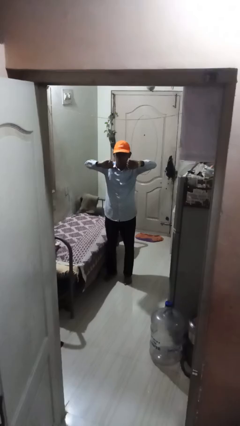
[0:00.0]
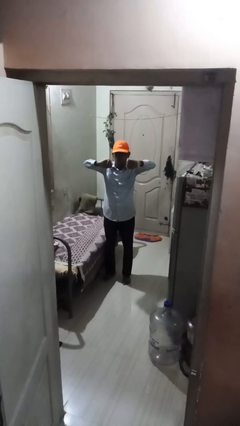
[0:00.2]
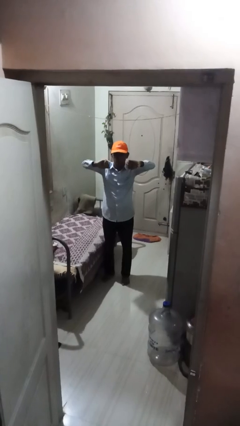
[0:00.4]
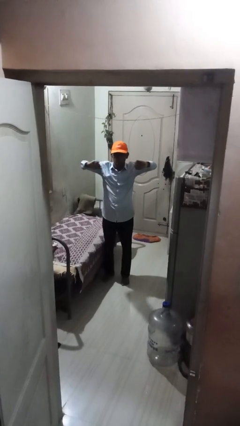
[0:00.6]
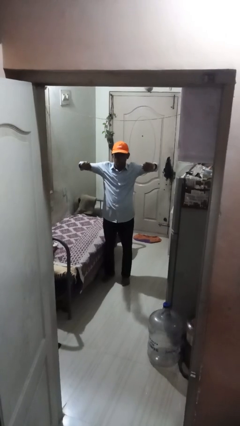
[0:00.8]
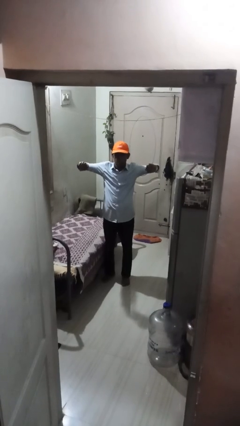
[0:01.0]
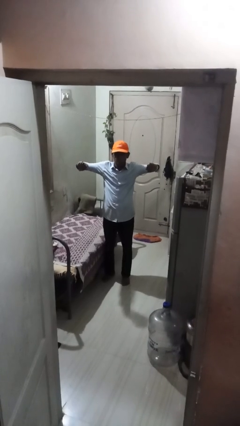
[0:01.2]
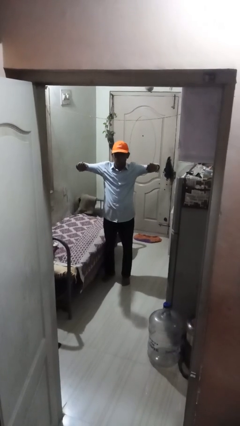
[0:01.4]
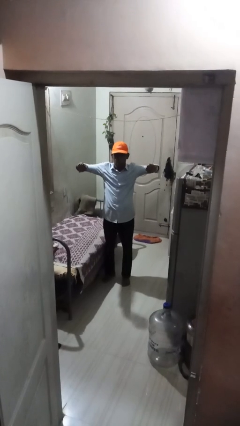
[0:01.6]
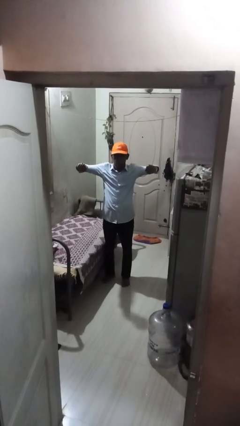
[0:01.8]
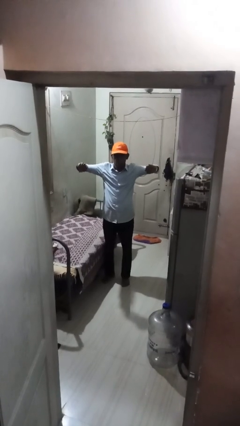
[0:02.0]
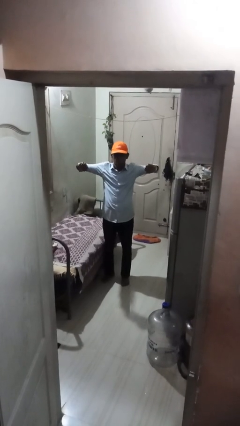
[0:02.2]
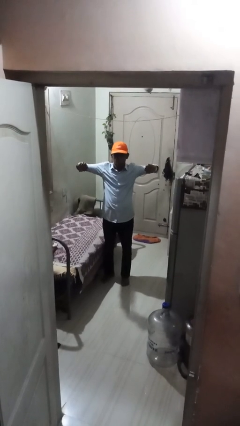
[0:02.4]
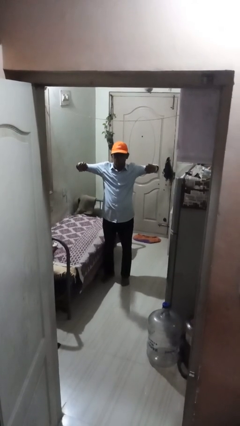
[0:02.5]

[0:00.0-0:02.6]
person gestures zoom out

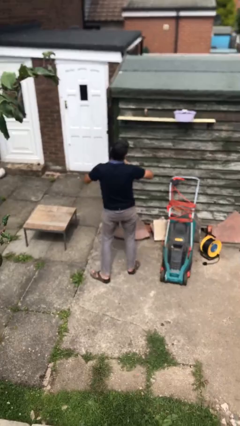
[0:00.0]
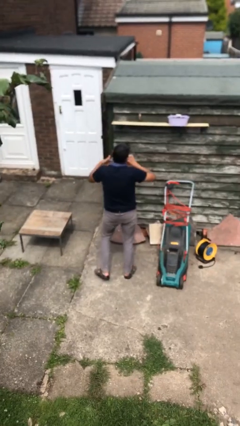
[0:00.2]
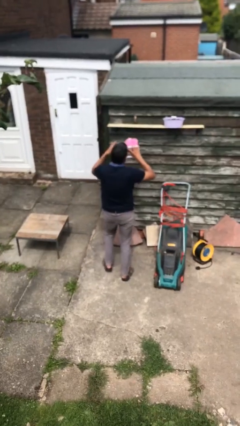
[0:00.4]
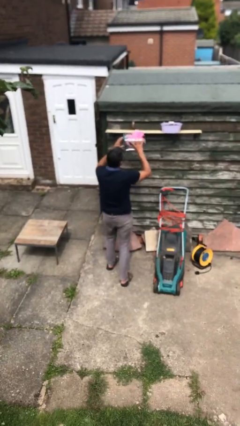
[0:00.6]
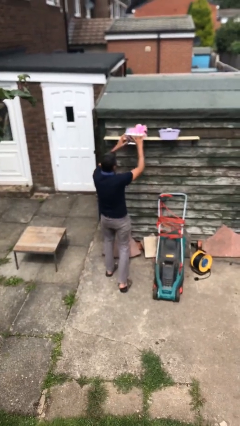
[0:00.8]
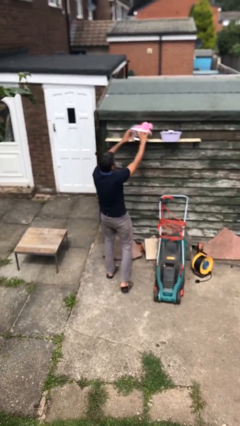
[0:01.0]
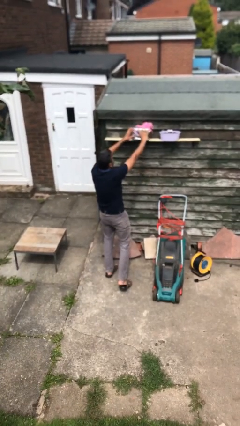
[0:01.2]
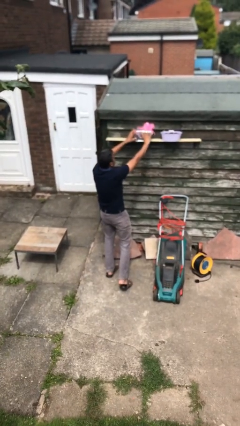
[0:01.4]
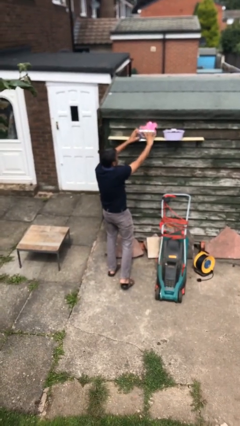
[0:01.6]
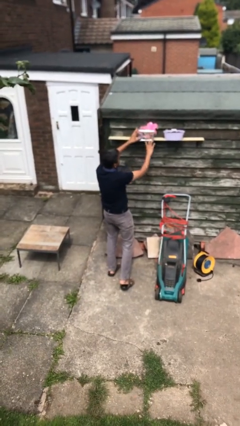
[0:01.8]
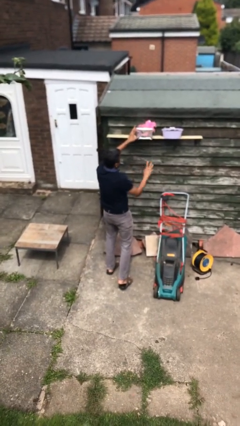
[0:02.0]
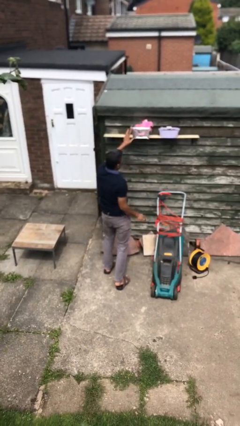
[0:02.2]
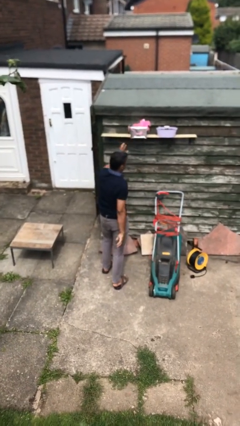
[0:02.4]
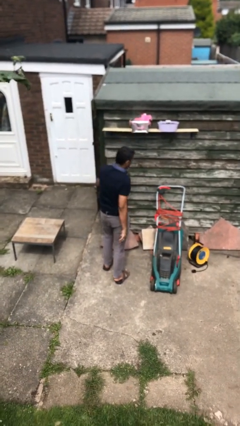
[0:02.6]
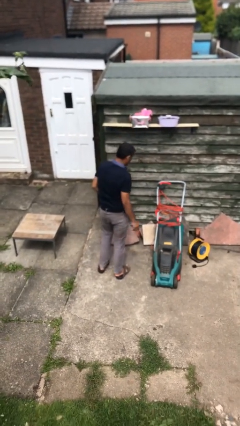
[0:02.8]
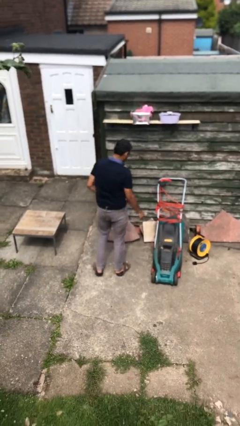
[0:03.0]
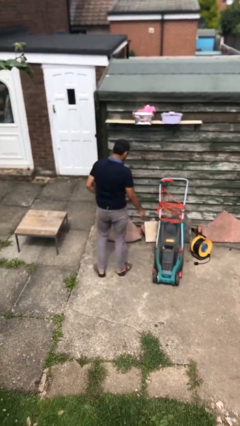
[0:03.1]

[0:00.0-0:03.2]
person puts down object on shelf

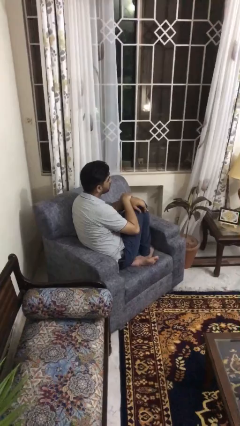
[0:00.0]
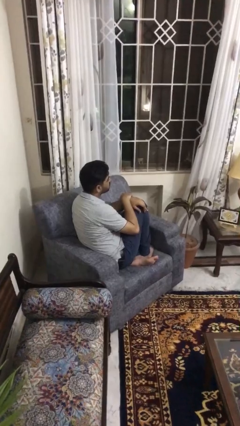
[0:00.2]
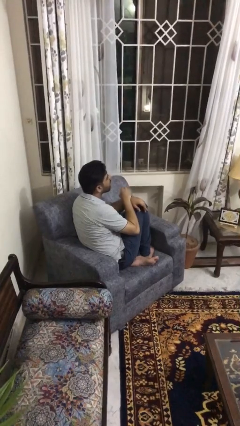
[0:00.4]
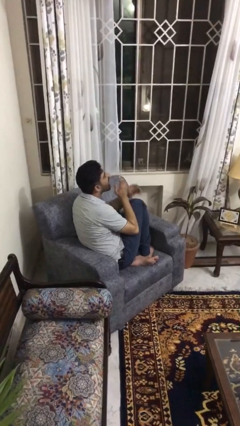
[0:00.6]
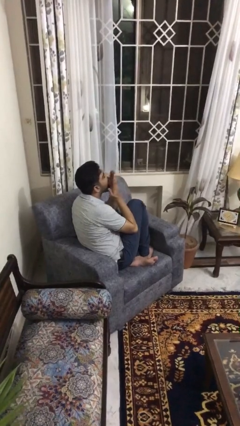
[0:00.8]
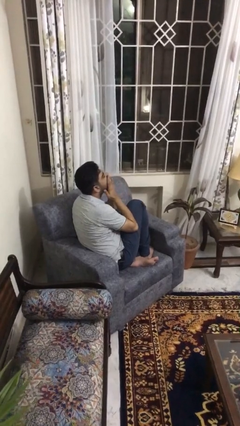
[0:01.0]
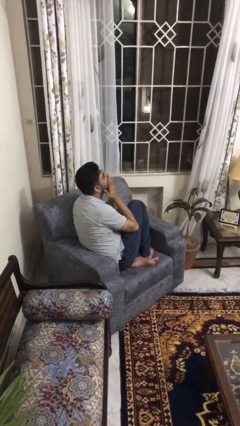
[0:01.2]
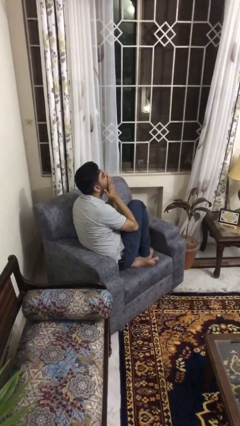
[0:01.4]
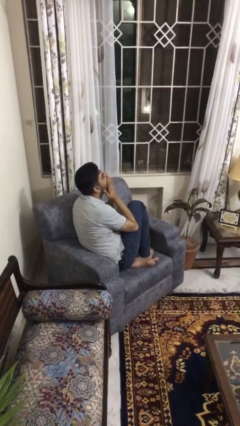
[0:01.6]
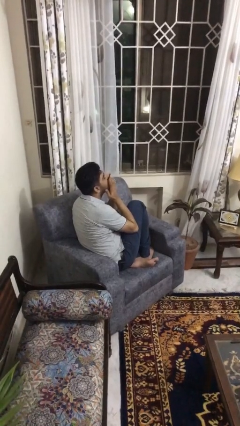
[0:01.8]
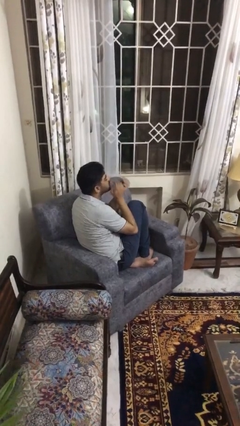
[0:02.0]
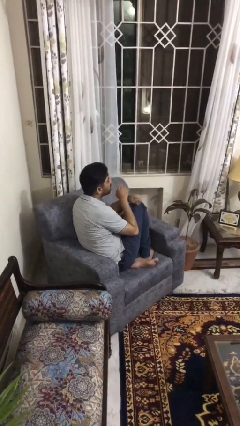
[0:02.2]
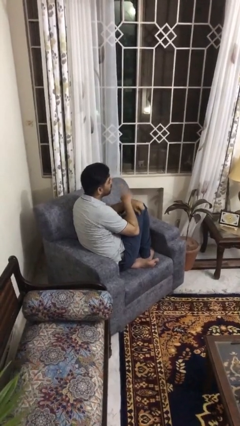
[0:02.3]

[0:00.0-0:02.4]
person yawns

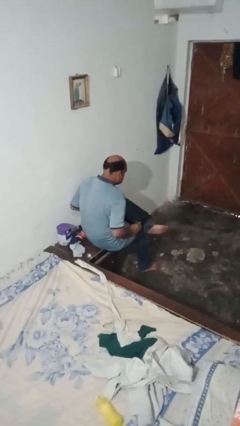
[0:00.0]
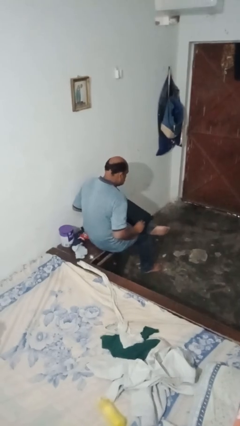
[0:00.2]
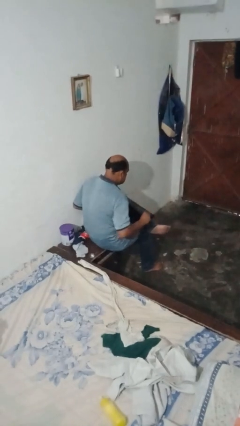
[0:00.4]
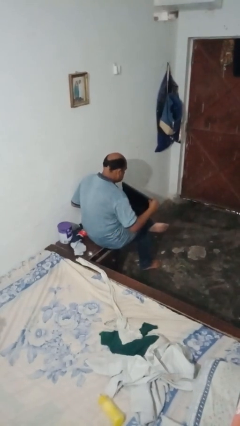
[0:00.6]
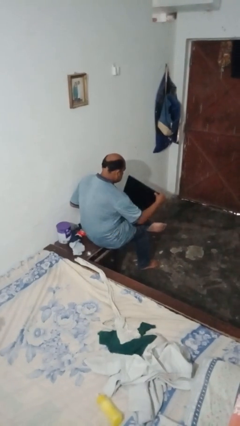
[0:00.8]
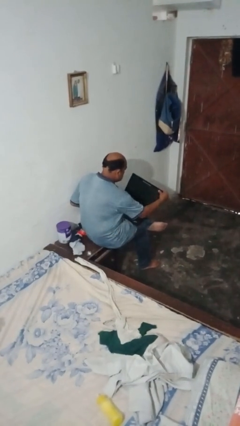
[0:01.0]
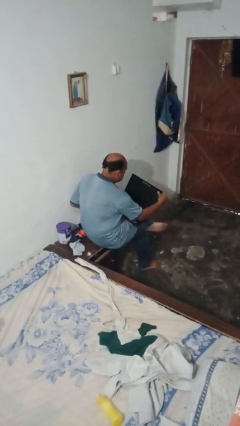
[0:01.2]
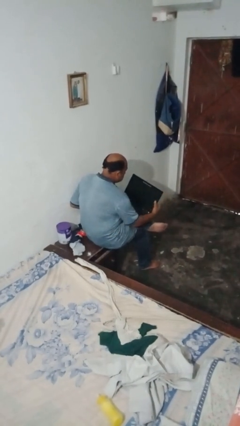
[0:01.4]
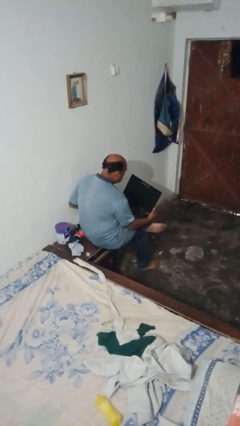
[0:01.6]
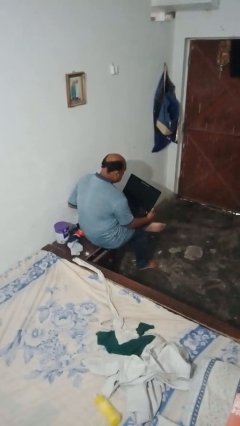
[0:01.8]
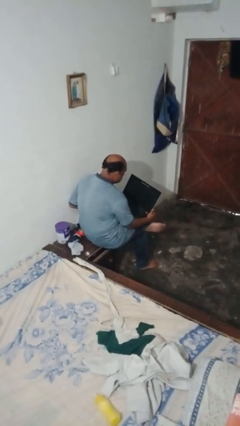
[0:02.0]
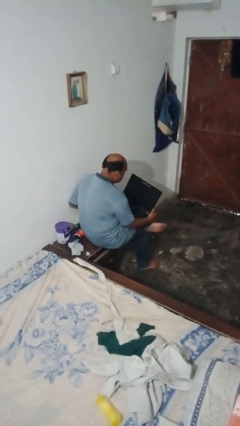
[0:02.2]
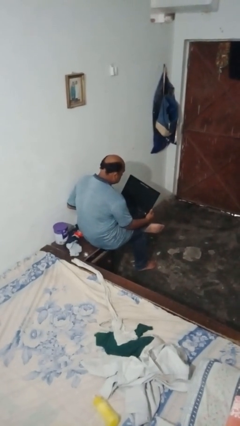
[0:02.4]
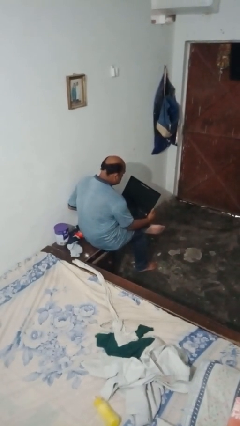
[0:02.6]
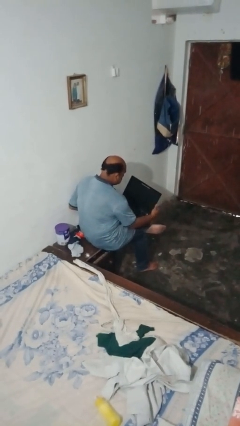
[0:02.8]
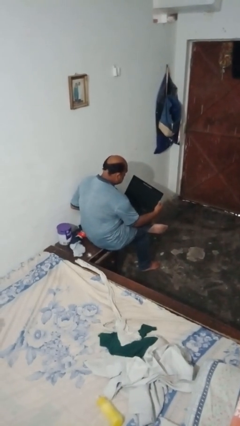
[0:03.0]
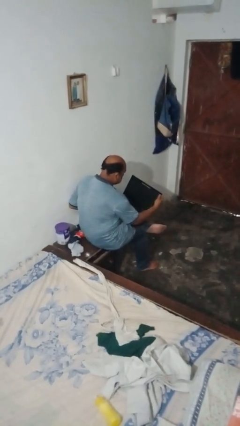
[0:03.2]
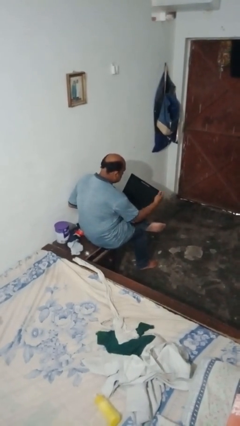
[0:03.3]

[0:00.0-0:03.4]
person opens laptop

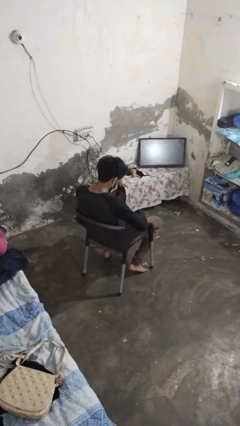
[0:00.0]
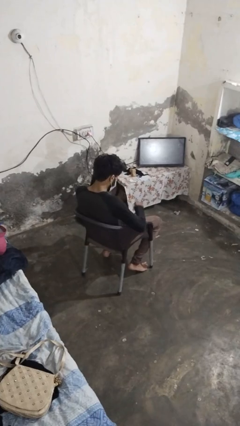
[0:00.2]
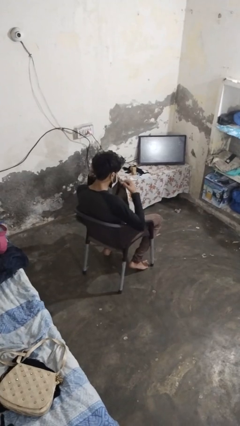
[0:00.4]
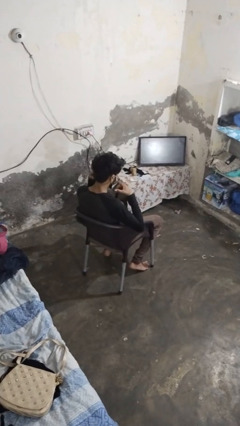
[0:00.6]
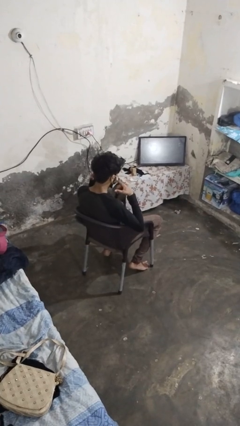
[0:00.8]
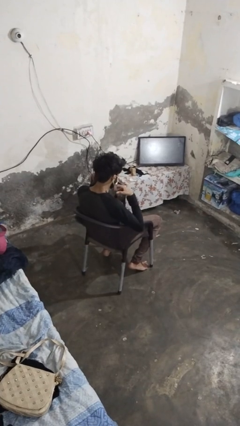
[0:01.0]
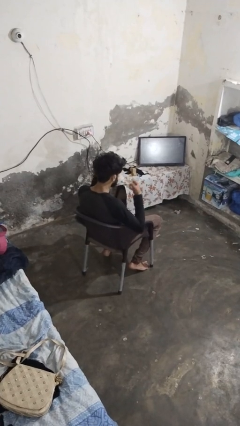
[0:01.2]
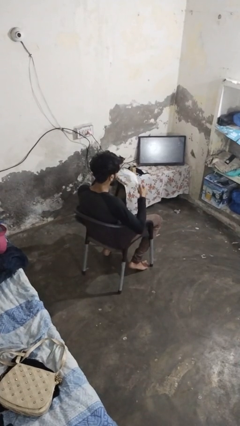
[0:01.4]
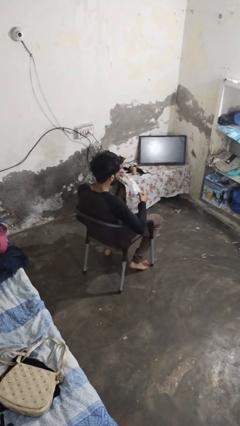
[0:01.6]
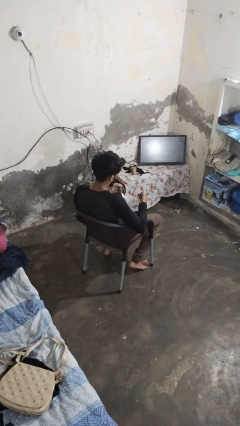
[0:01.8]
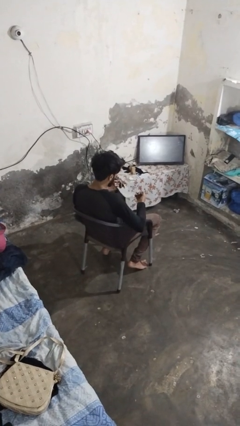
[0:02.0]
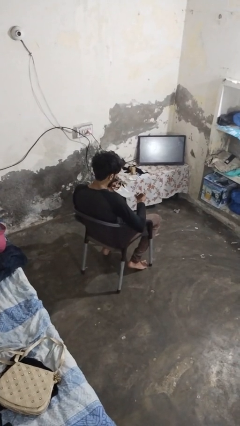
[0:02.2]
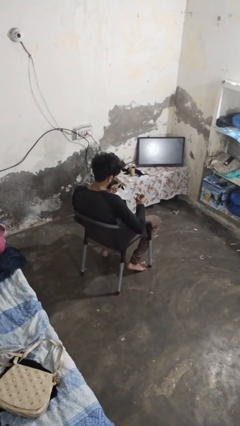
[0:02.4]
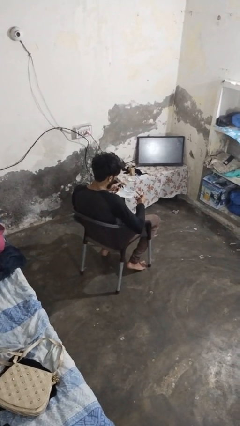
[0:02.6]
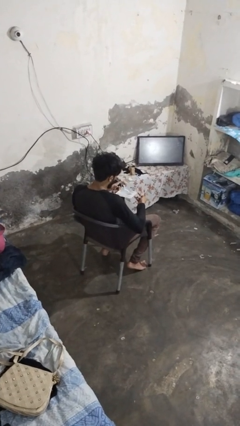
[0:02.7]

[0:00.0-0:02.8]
person takes off facemask

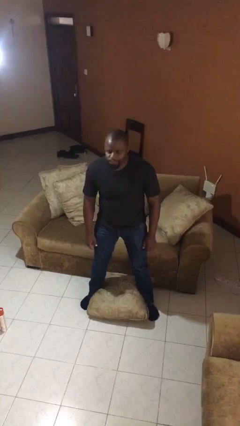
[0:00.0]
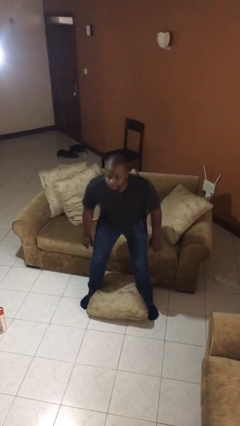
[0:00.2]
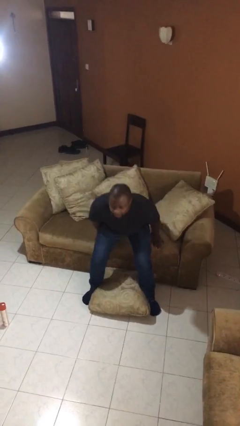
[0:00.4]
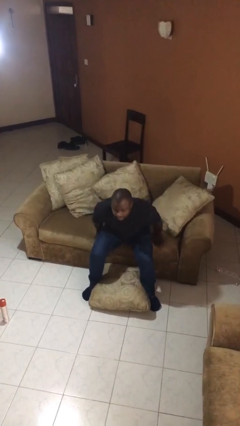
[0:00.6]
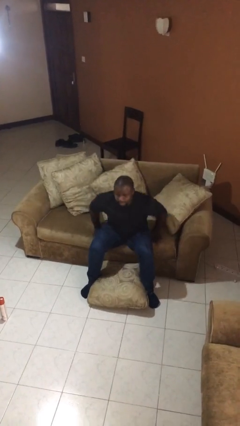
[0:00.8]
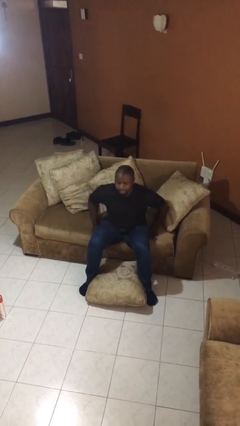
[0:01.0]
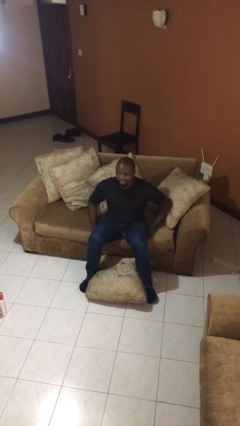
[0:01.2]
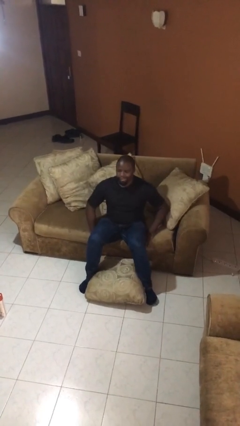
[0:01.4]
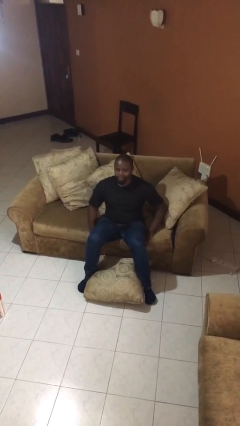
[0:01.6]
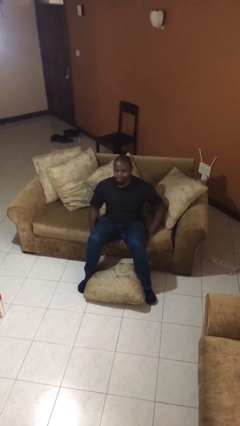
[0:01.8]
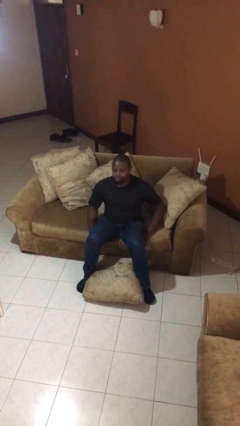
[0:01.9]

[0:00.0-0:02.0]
person sits down

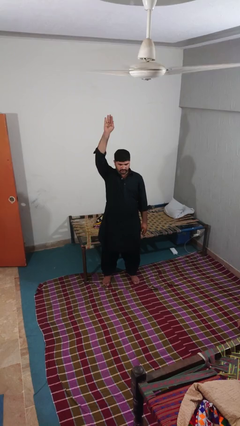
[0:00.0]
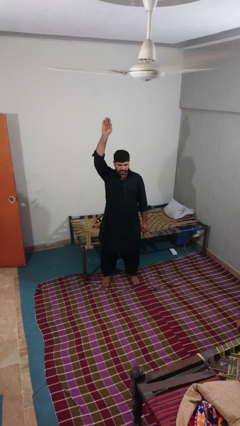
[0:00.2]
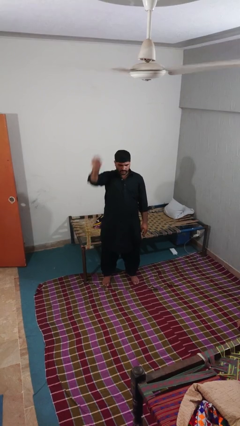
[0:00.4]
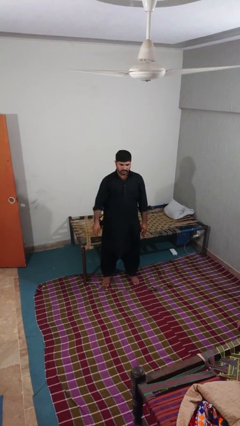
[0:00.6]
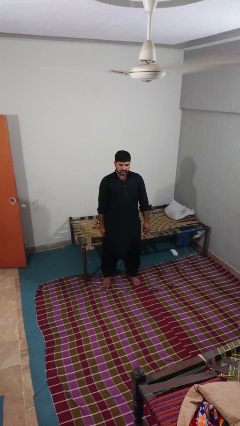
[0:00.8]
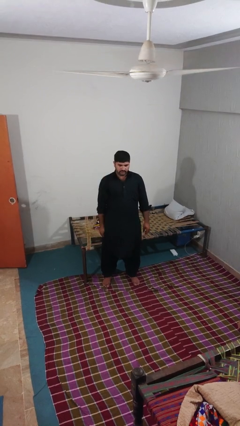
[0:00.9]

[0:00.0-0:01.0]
person gestures lower hand
